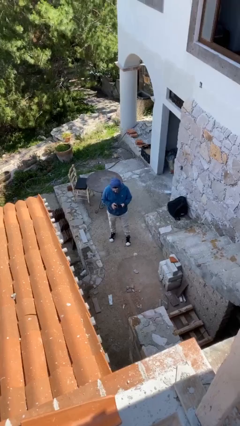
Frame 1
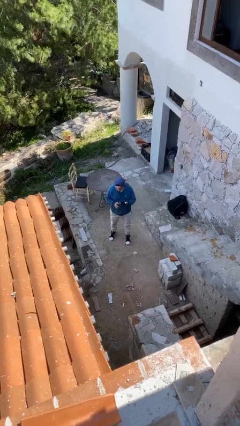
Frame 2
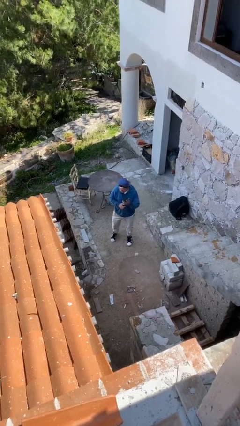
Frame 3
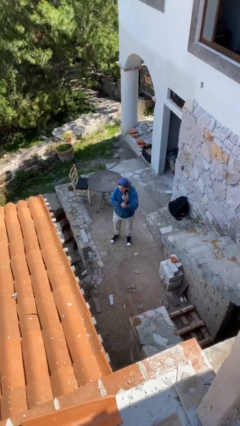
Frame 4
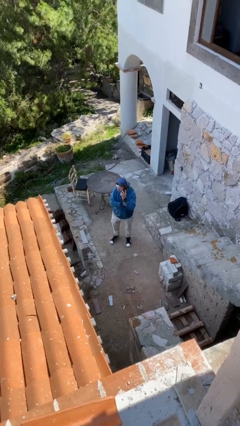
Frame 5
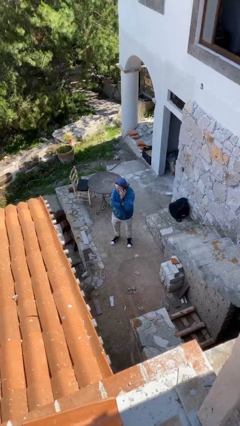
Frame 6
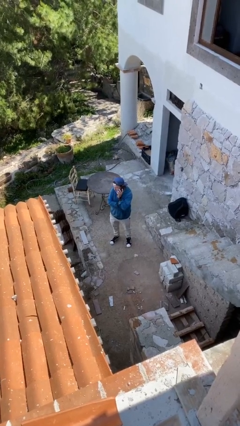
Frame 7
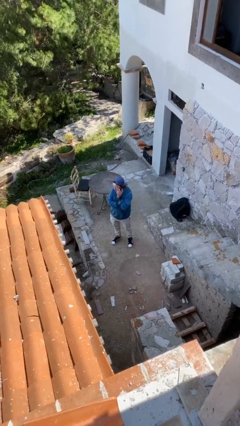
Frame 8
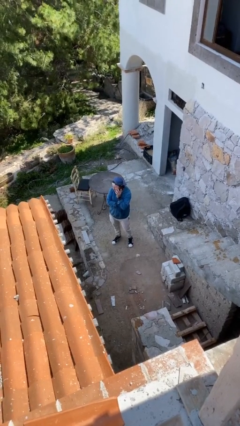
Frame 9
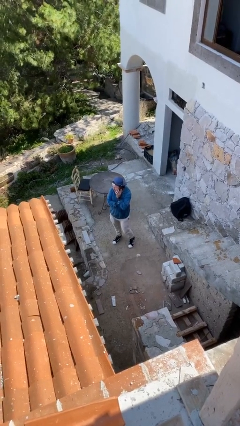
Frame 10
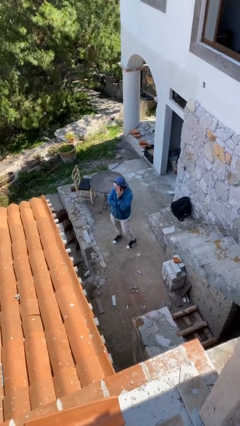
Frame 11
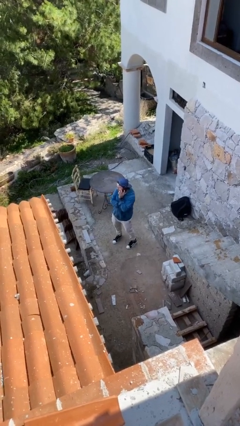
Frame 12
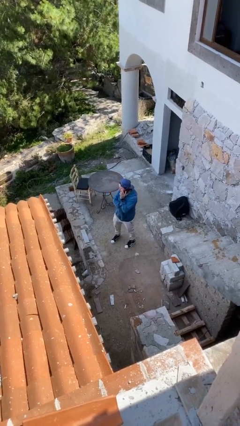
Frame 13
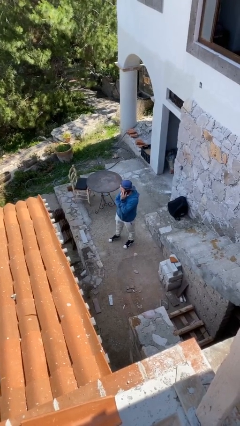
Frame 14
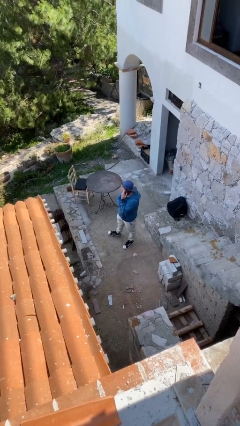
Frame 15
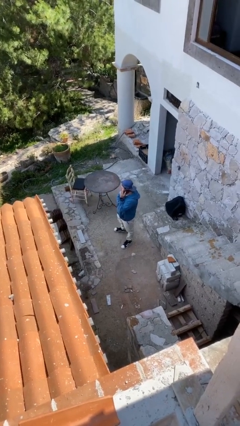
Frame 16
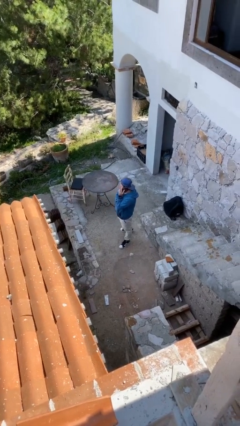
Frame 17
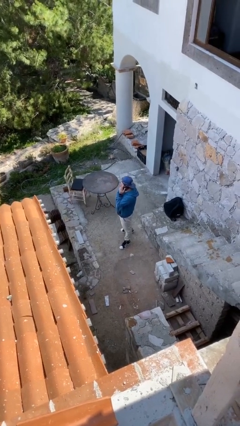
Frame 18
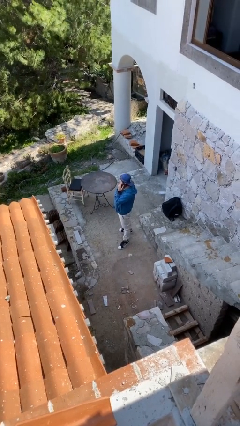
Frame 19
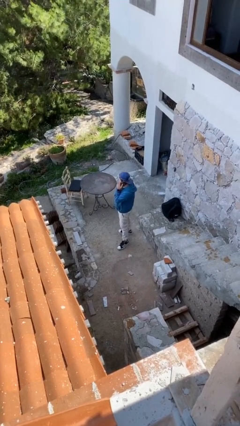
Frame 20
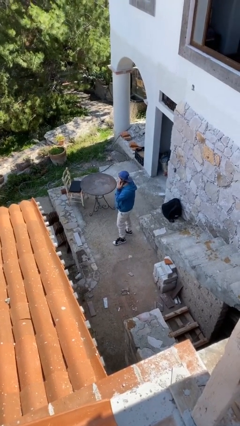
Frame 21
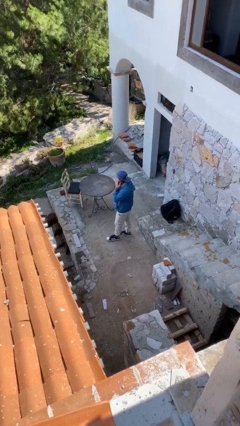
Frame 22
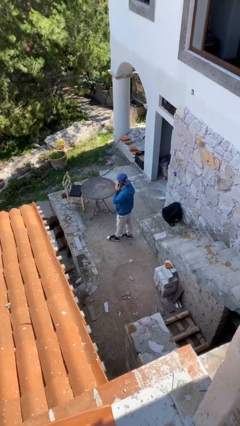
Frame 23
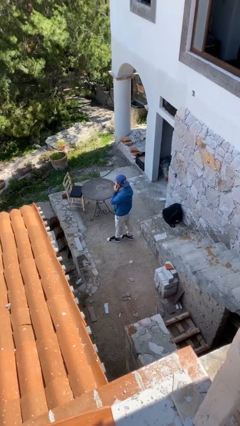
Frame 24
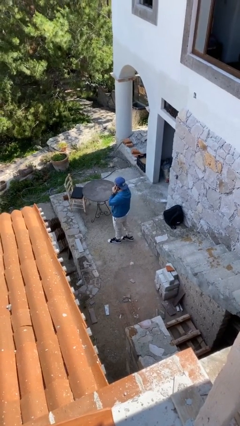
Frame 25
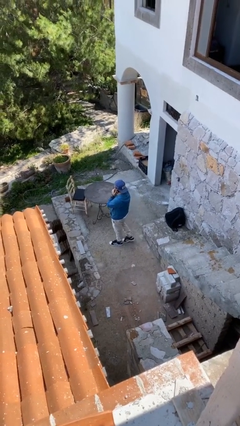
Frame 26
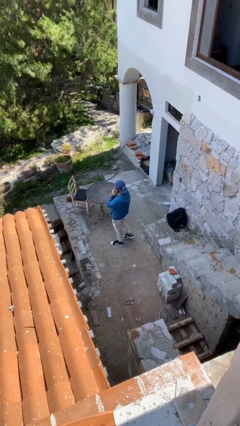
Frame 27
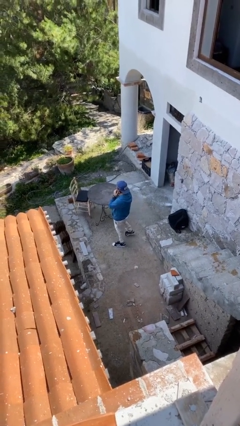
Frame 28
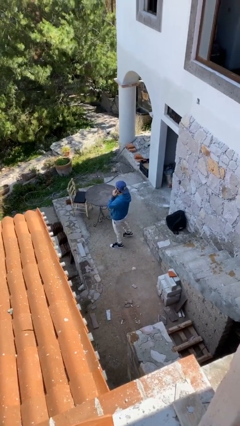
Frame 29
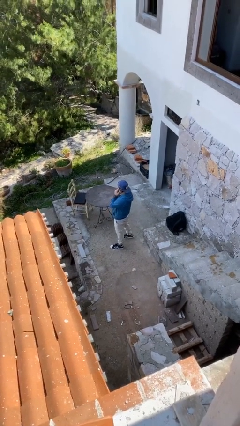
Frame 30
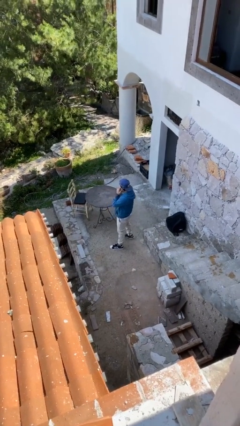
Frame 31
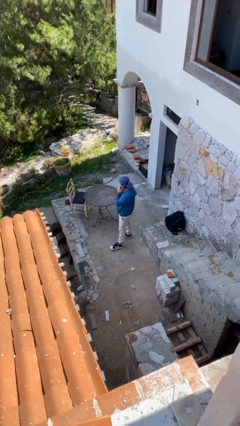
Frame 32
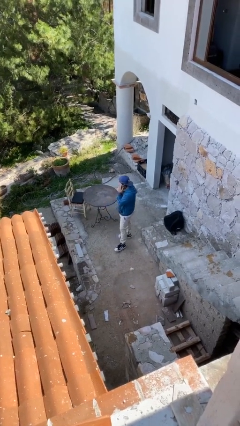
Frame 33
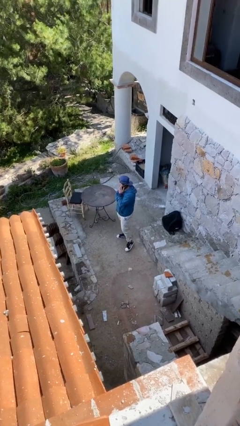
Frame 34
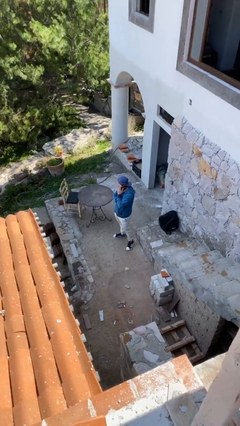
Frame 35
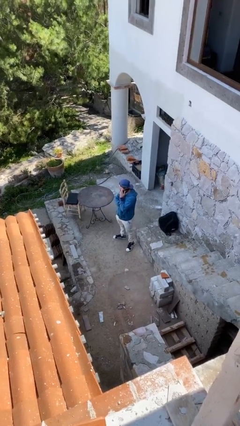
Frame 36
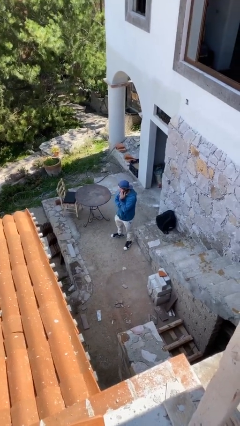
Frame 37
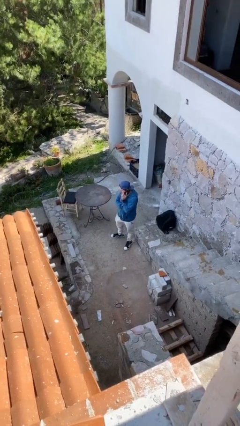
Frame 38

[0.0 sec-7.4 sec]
person talks on phone

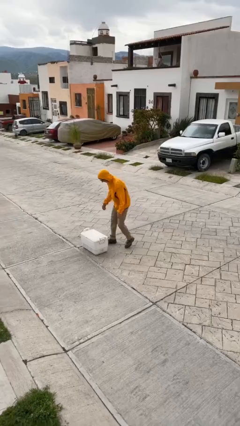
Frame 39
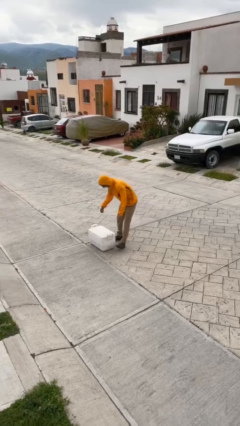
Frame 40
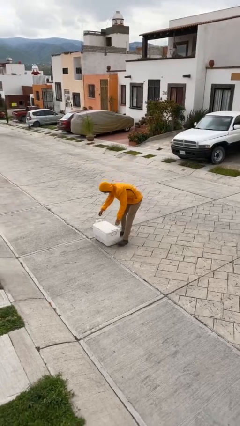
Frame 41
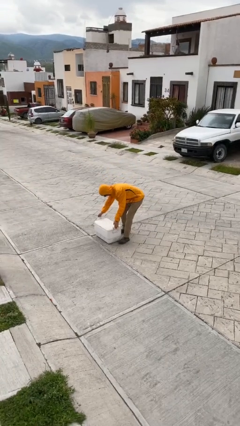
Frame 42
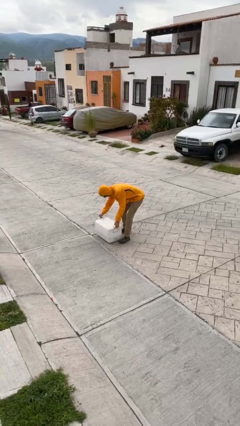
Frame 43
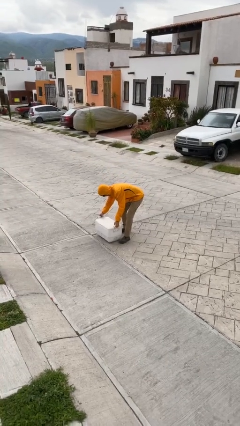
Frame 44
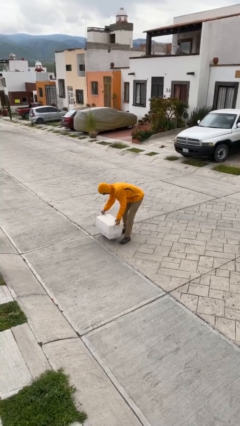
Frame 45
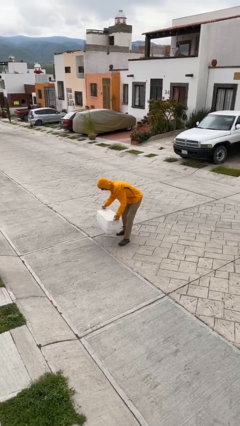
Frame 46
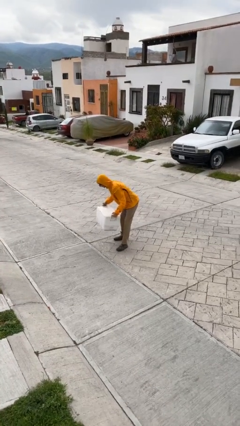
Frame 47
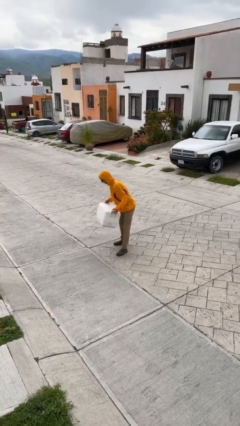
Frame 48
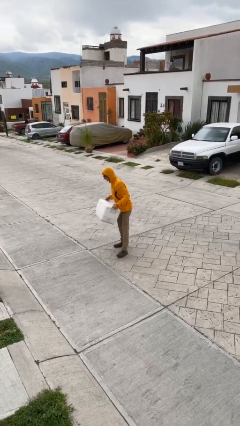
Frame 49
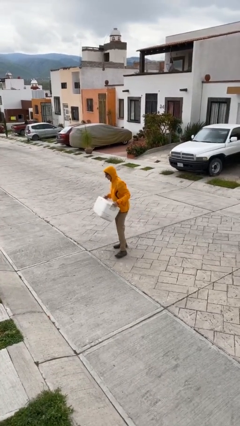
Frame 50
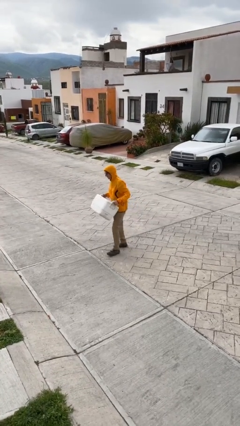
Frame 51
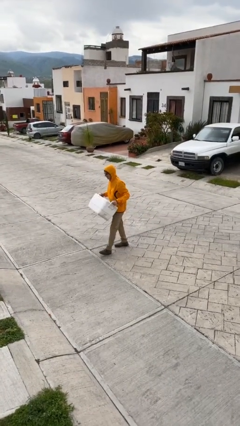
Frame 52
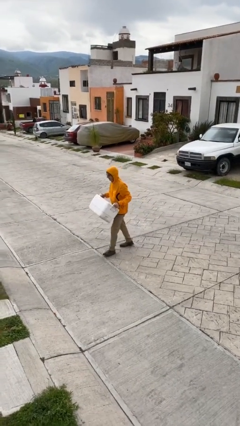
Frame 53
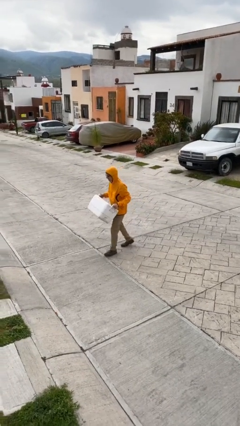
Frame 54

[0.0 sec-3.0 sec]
person picks up object from floor

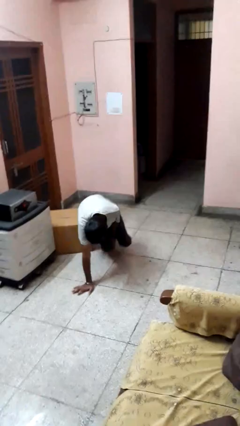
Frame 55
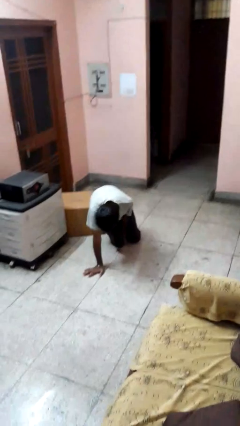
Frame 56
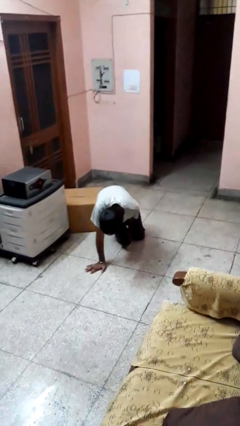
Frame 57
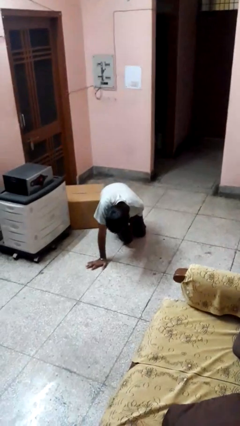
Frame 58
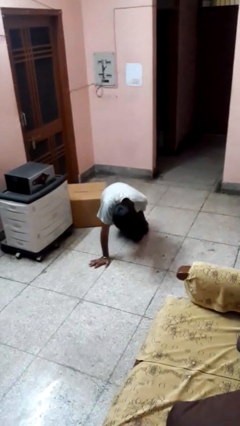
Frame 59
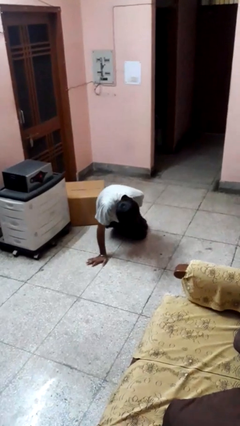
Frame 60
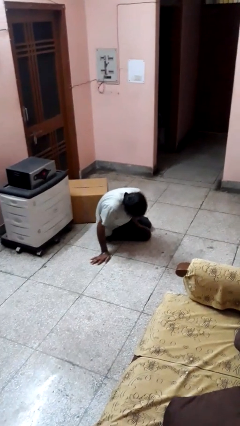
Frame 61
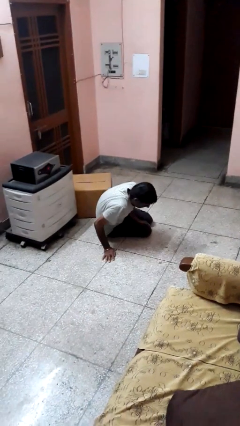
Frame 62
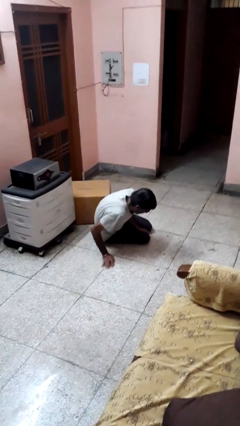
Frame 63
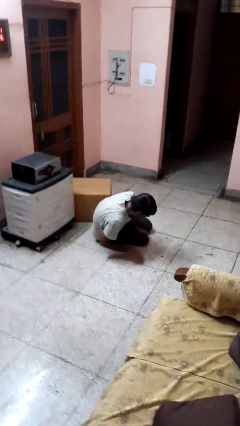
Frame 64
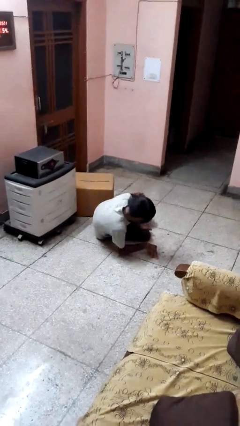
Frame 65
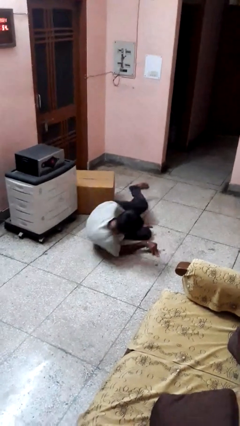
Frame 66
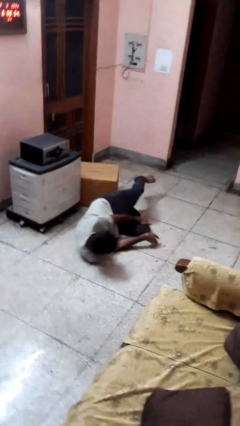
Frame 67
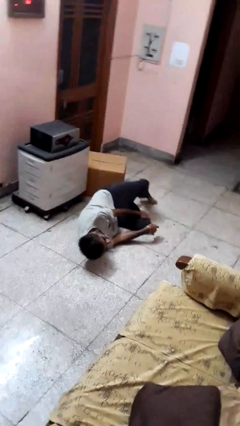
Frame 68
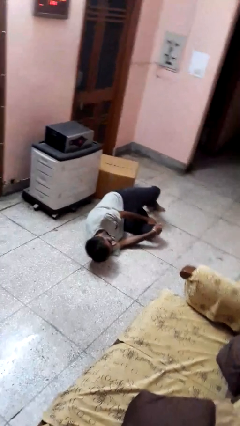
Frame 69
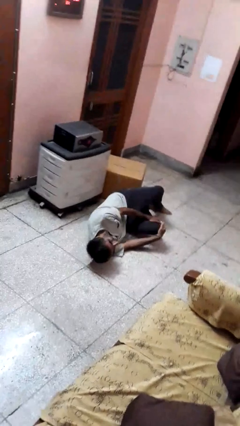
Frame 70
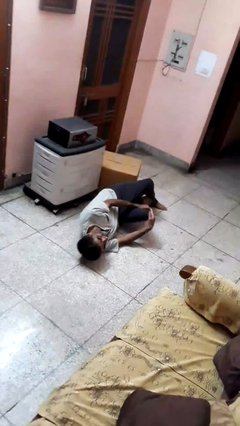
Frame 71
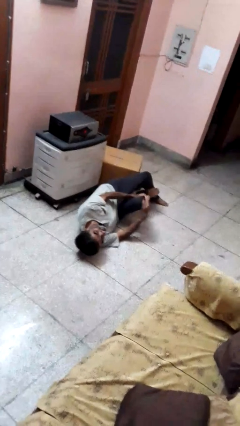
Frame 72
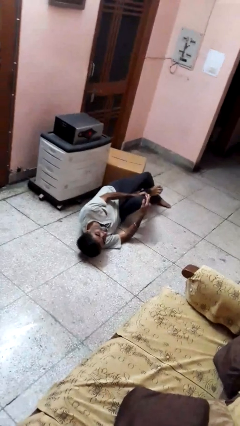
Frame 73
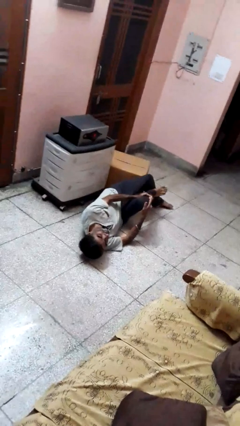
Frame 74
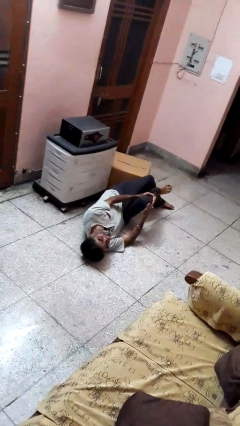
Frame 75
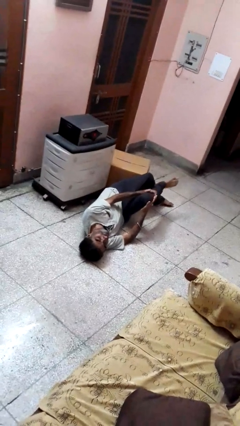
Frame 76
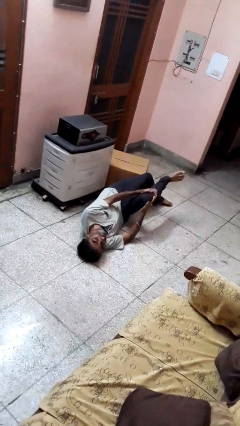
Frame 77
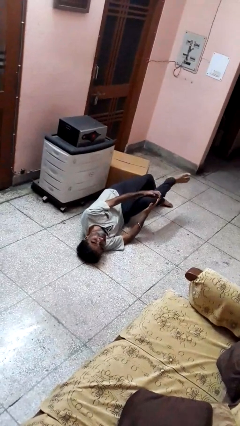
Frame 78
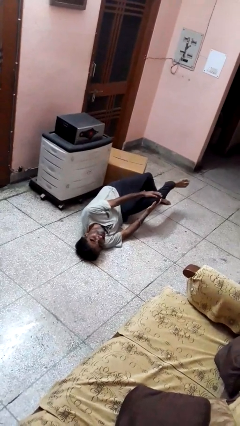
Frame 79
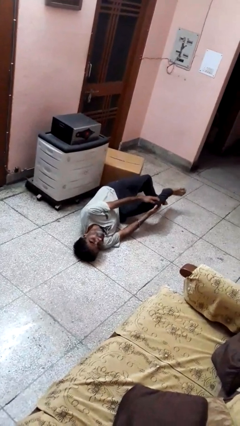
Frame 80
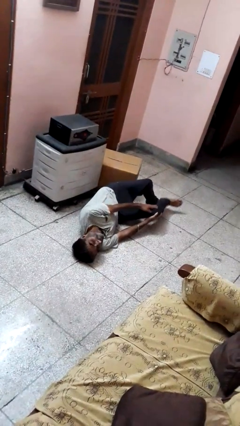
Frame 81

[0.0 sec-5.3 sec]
person lies down on floor

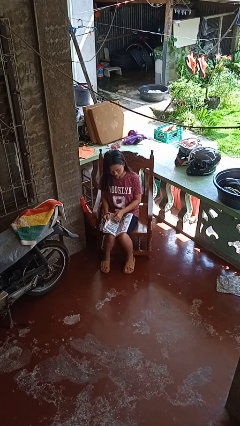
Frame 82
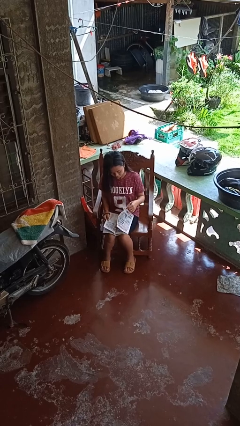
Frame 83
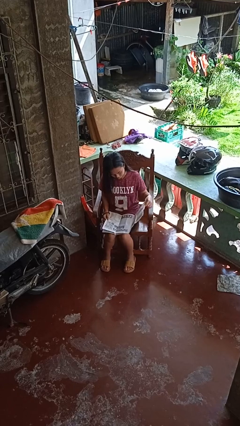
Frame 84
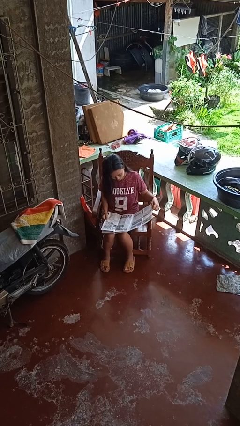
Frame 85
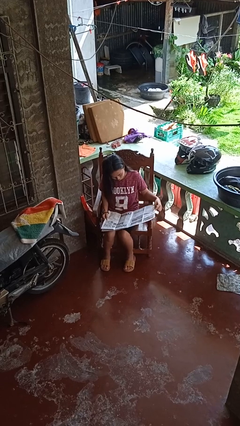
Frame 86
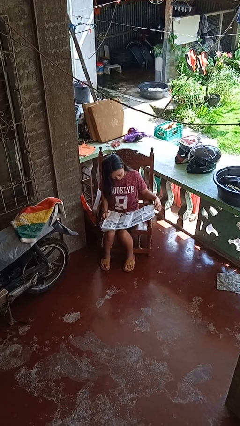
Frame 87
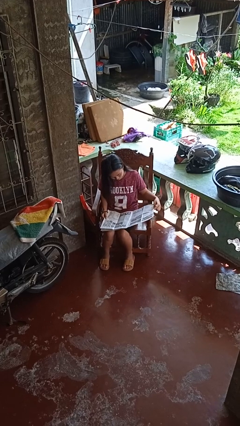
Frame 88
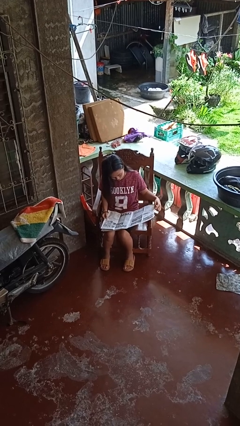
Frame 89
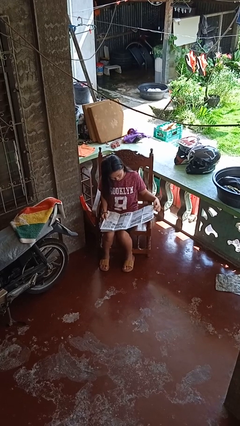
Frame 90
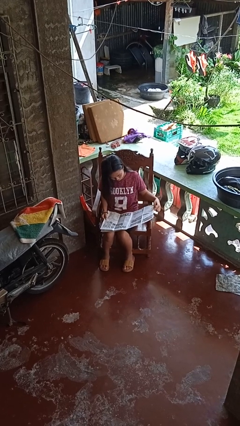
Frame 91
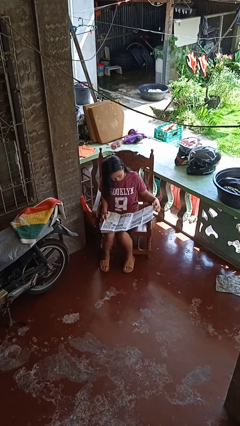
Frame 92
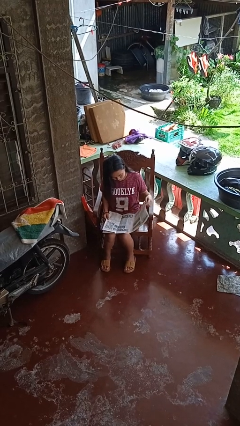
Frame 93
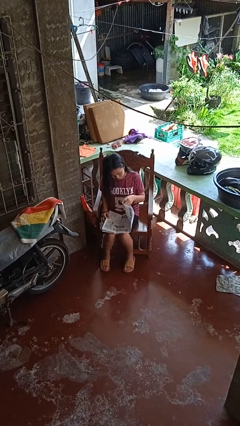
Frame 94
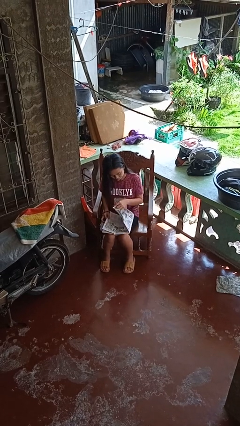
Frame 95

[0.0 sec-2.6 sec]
person reads newspaper
